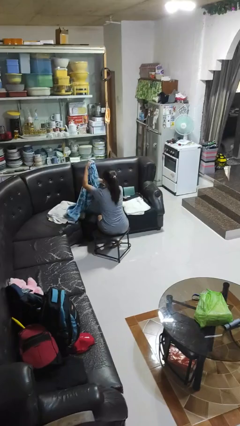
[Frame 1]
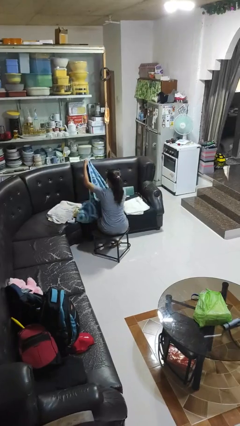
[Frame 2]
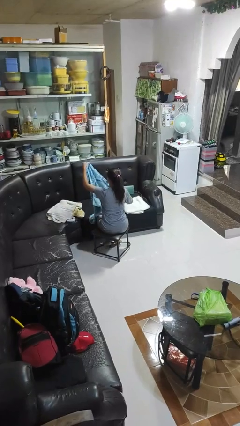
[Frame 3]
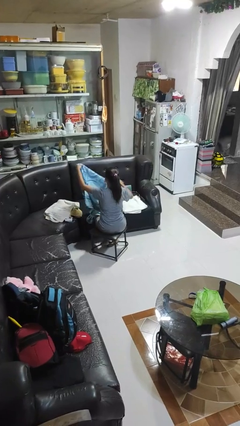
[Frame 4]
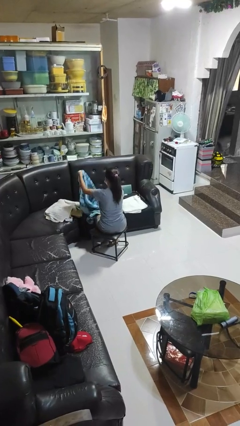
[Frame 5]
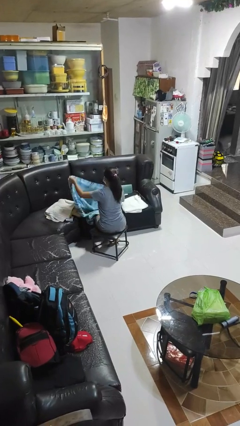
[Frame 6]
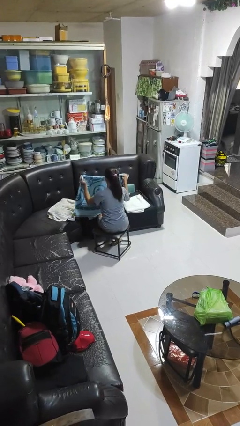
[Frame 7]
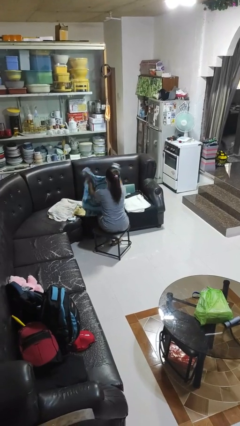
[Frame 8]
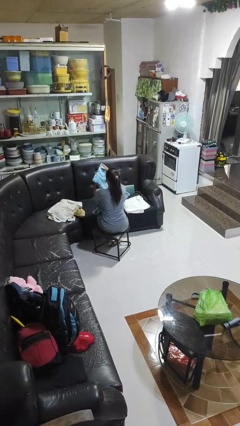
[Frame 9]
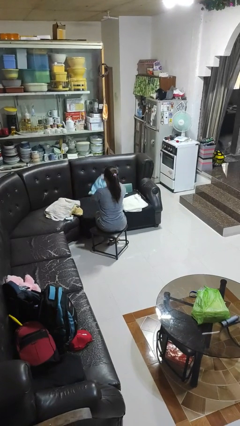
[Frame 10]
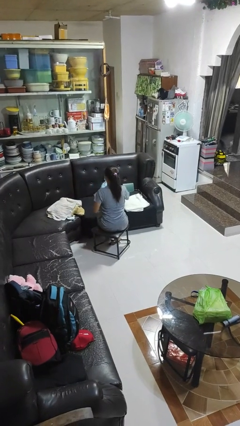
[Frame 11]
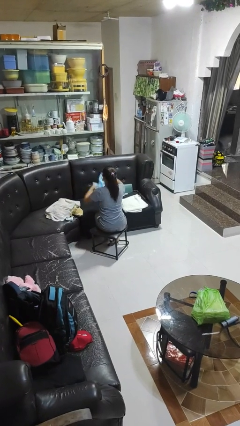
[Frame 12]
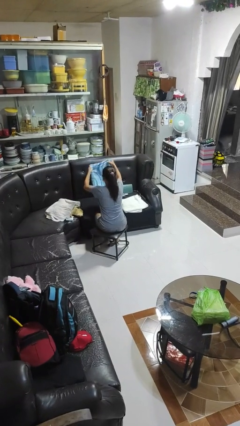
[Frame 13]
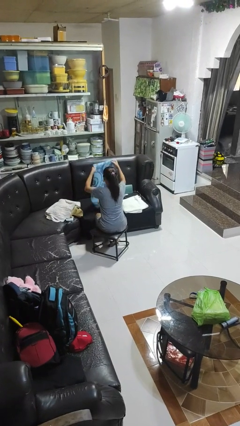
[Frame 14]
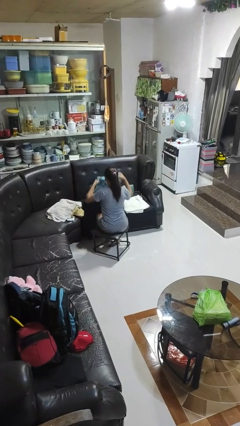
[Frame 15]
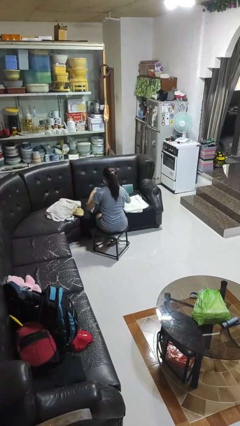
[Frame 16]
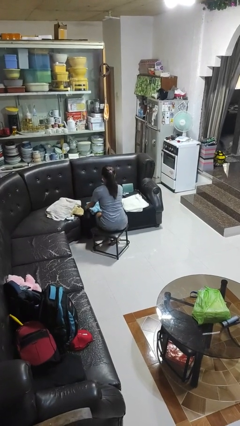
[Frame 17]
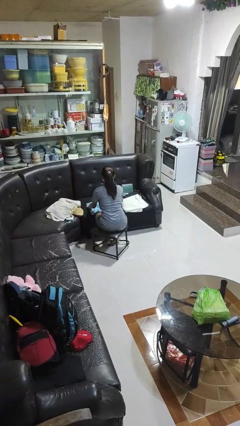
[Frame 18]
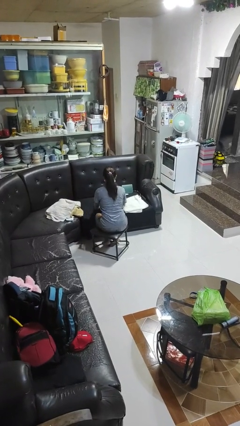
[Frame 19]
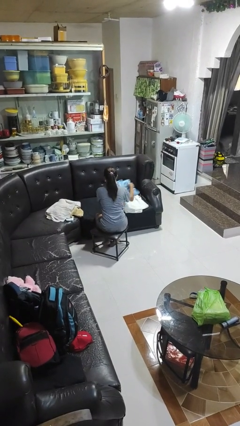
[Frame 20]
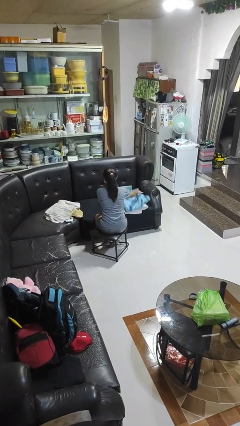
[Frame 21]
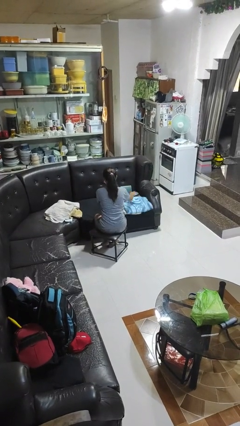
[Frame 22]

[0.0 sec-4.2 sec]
person folds towel

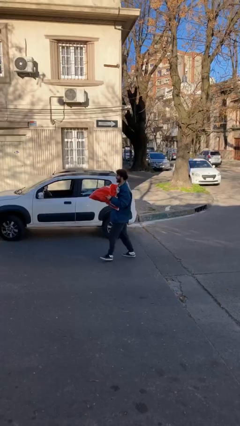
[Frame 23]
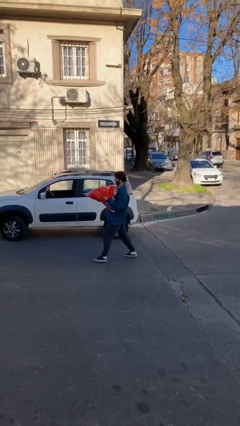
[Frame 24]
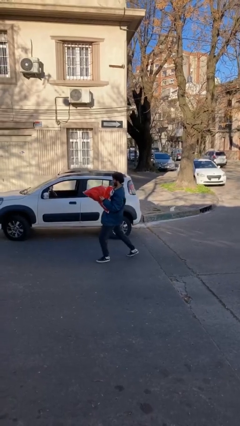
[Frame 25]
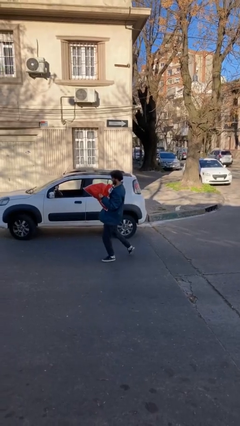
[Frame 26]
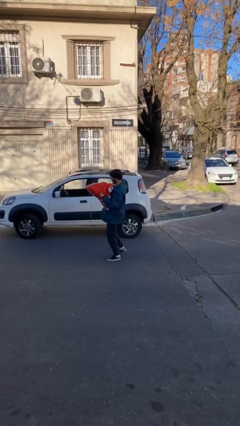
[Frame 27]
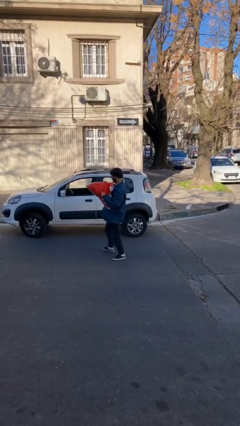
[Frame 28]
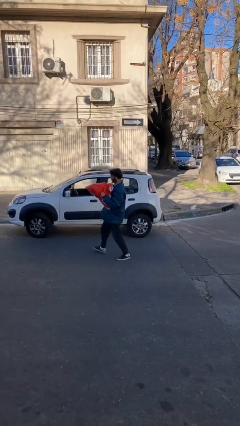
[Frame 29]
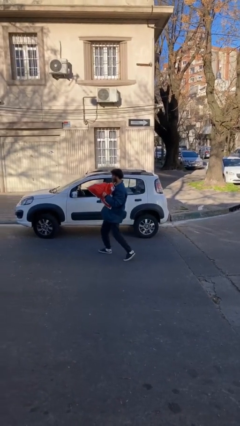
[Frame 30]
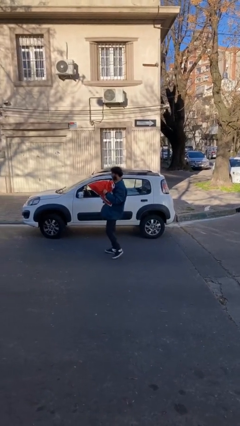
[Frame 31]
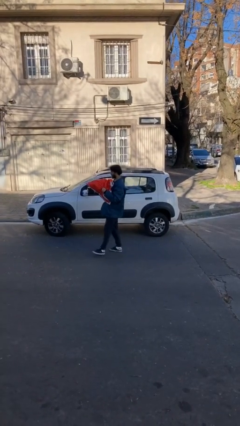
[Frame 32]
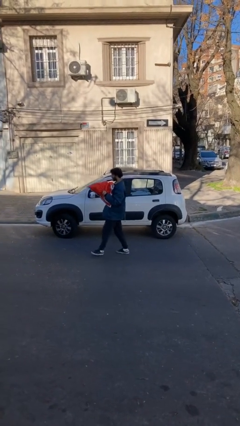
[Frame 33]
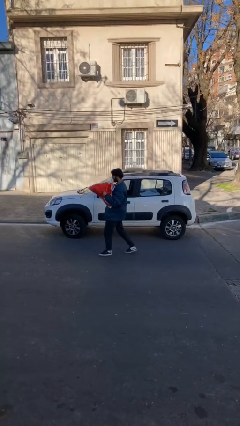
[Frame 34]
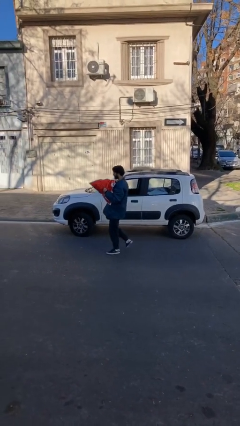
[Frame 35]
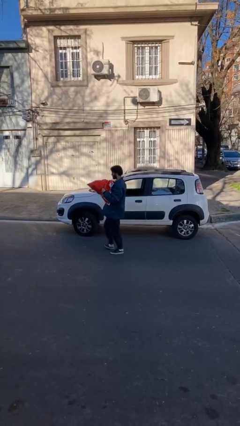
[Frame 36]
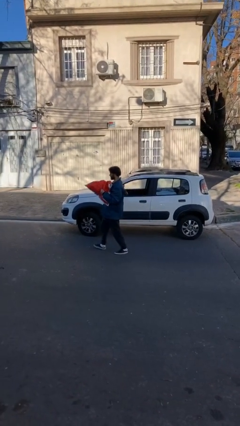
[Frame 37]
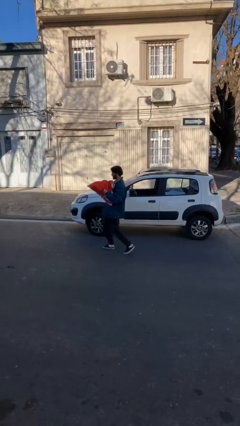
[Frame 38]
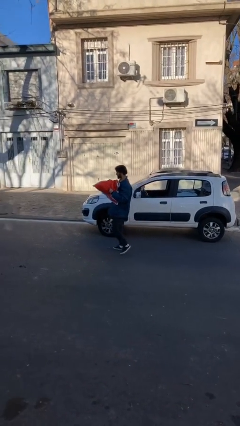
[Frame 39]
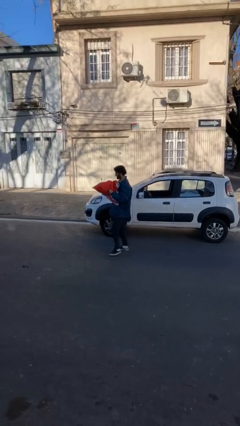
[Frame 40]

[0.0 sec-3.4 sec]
person carries heavy object

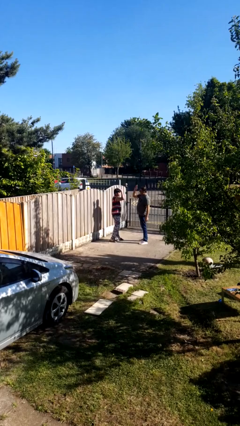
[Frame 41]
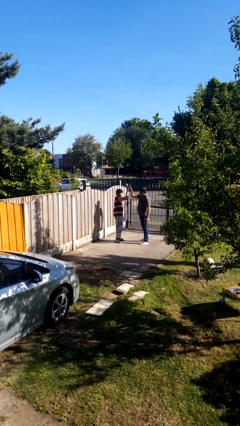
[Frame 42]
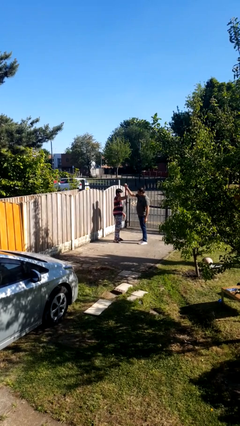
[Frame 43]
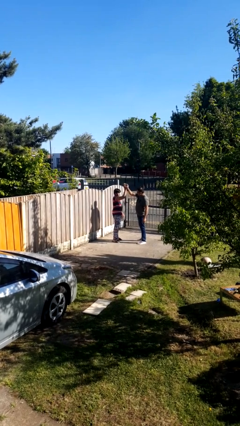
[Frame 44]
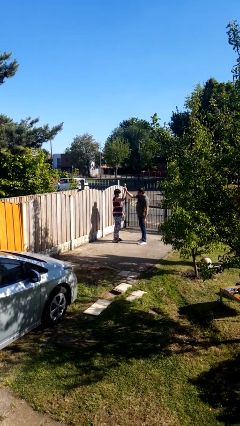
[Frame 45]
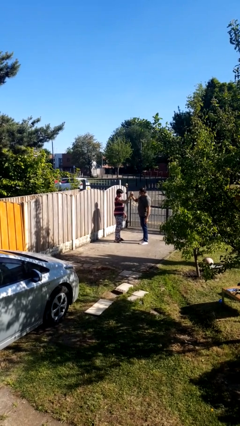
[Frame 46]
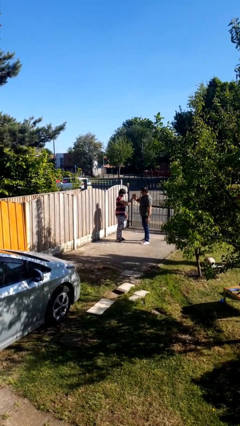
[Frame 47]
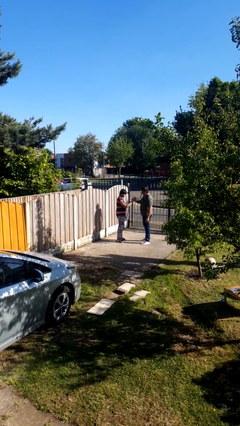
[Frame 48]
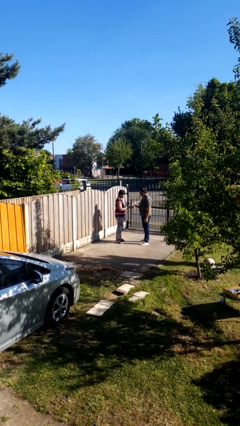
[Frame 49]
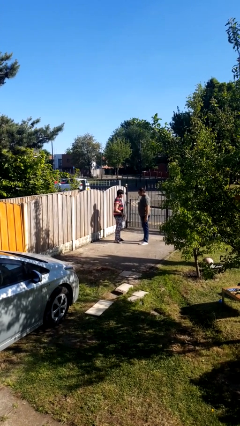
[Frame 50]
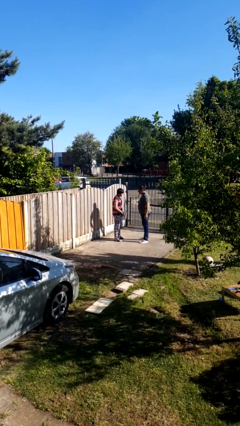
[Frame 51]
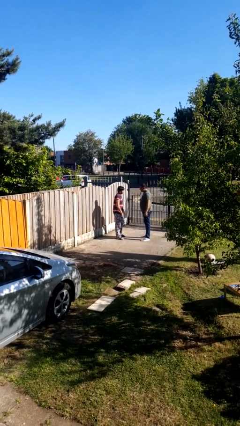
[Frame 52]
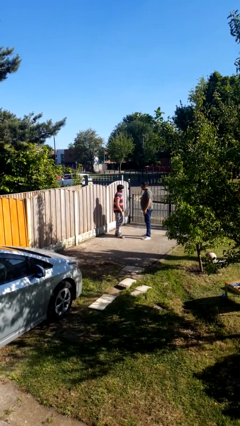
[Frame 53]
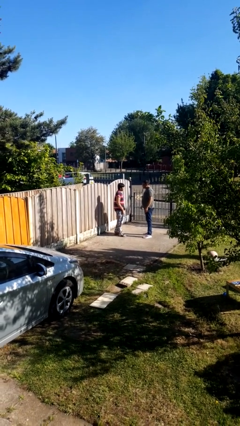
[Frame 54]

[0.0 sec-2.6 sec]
person highfives hand

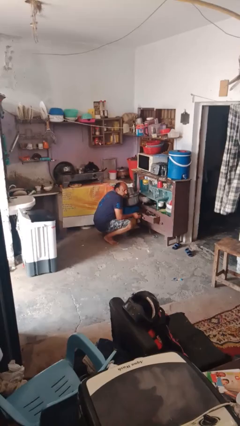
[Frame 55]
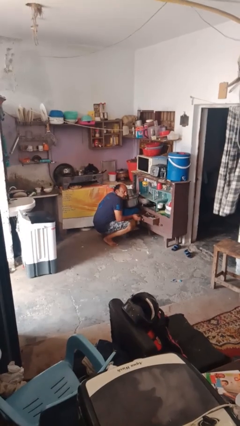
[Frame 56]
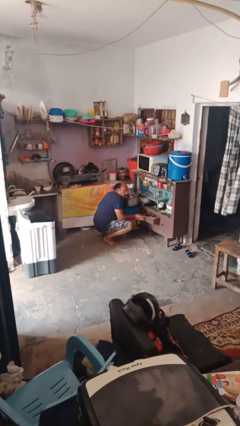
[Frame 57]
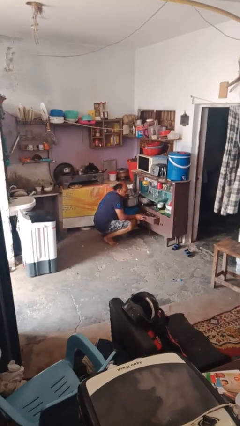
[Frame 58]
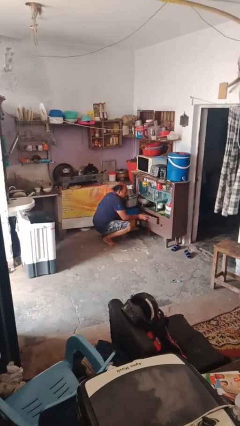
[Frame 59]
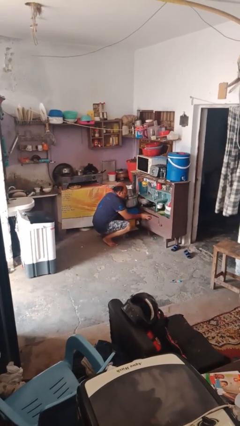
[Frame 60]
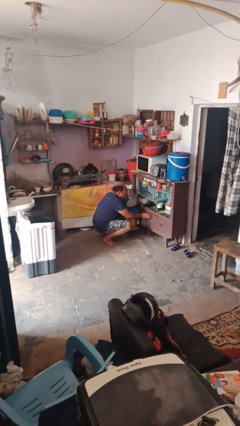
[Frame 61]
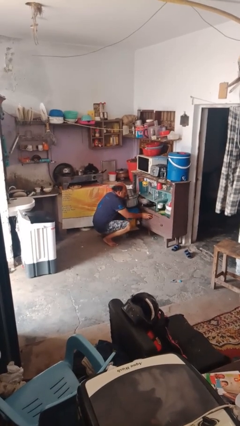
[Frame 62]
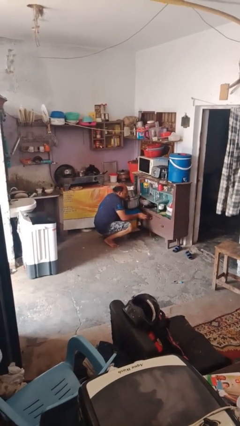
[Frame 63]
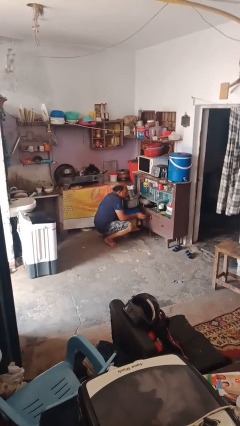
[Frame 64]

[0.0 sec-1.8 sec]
person closes kitchen drawer

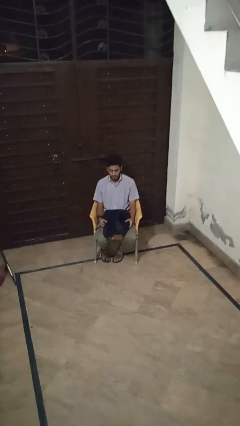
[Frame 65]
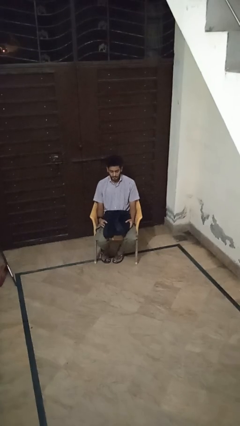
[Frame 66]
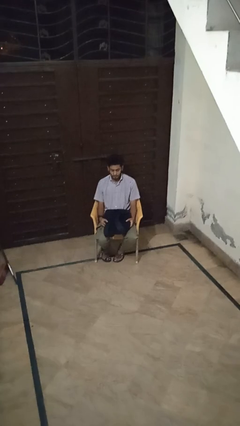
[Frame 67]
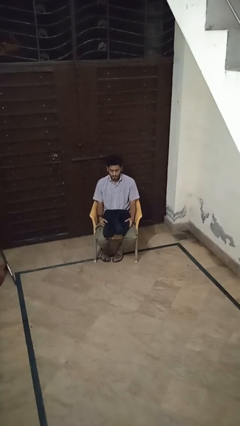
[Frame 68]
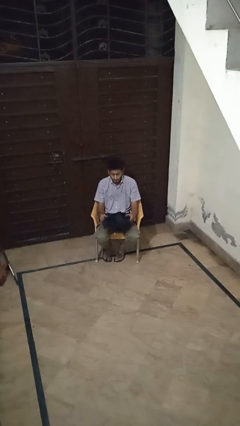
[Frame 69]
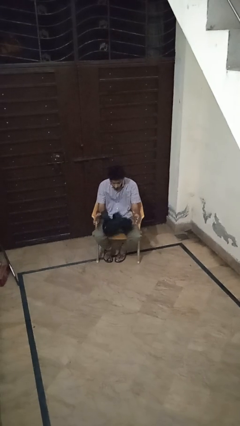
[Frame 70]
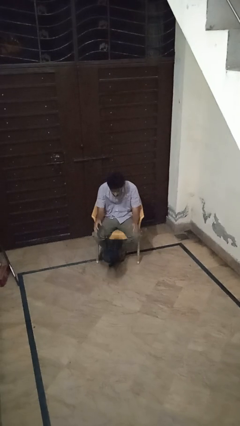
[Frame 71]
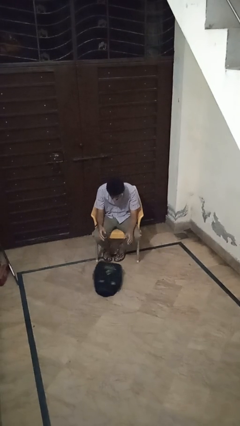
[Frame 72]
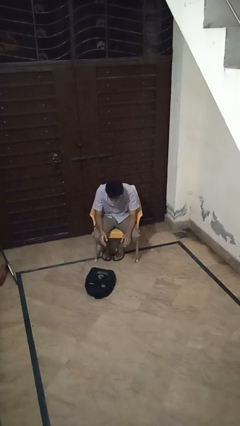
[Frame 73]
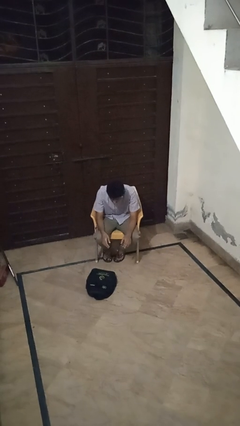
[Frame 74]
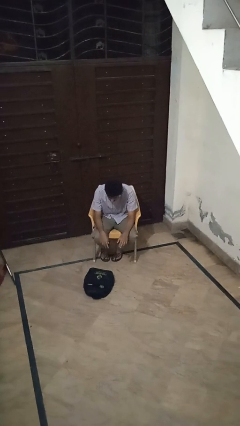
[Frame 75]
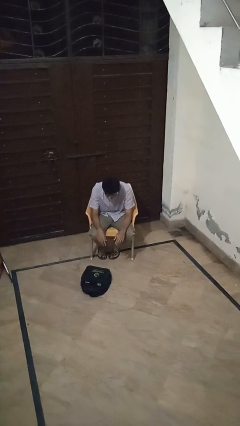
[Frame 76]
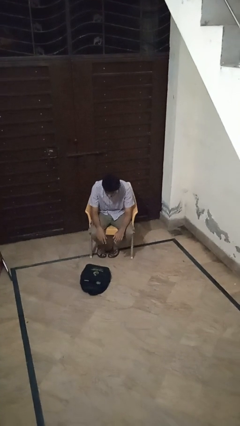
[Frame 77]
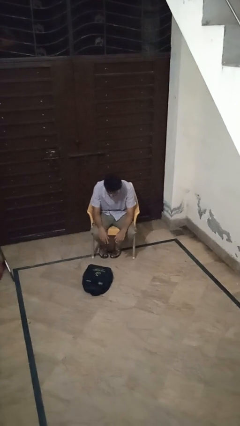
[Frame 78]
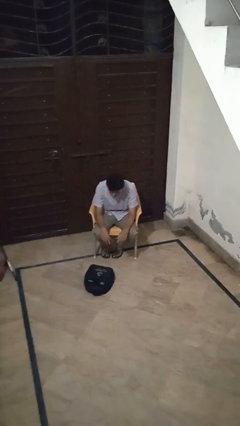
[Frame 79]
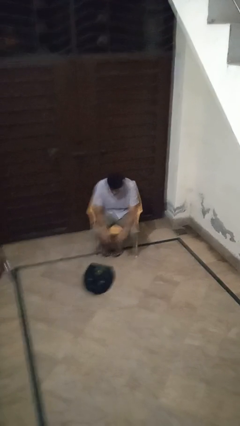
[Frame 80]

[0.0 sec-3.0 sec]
person drops object

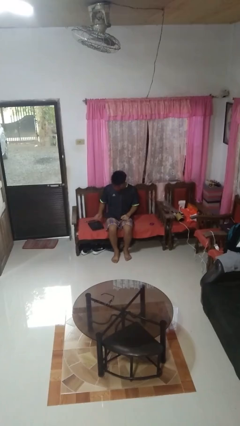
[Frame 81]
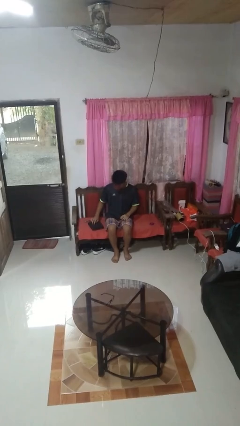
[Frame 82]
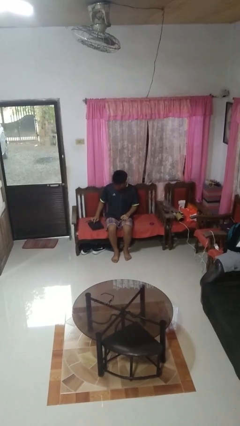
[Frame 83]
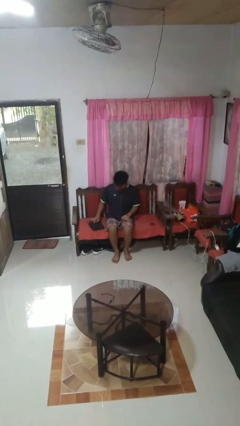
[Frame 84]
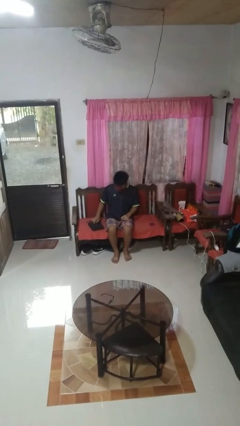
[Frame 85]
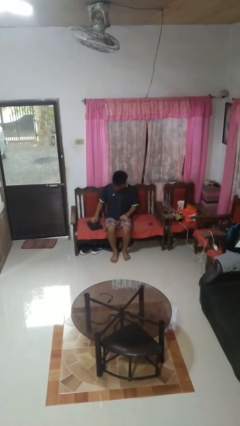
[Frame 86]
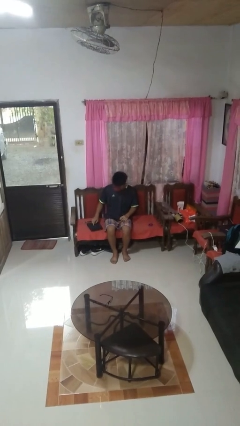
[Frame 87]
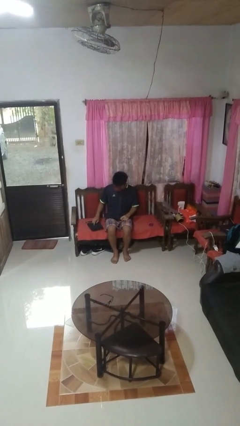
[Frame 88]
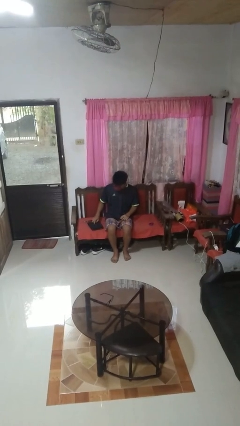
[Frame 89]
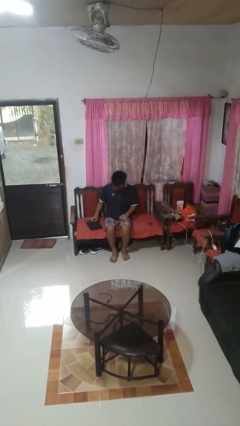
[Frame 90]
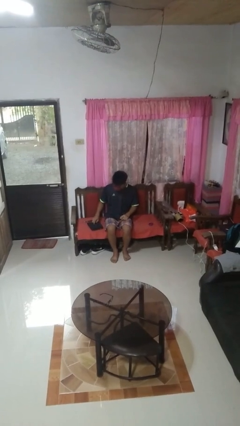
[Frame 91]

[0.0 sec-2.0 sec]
person taps object with finger

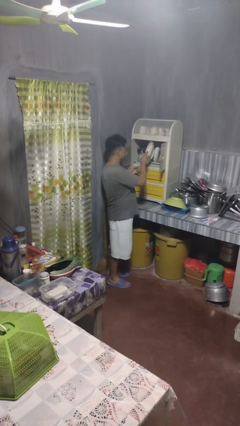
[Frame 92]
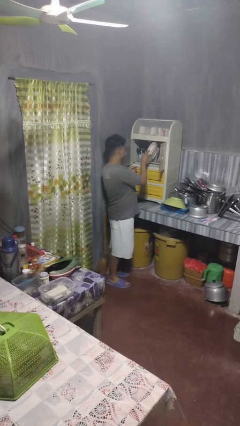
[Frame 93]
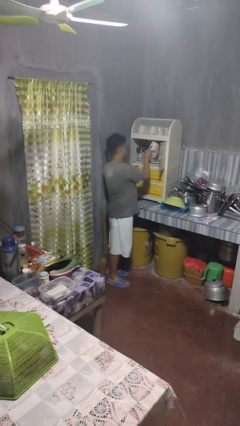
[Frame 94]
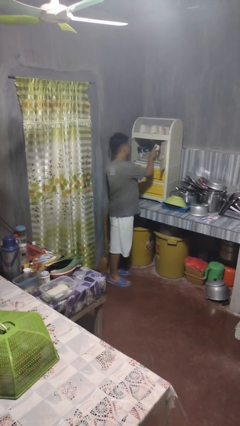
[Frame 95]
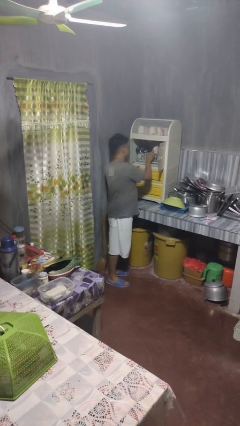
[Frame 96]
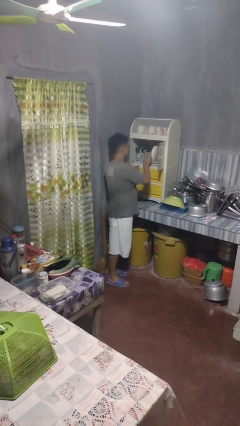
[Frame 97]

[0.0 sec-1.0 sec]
person puts object in cabinet
